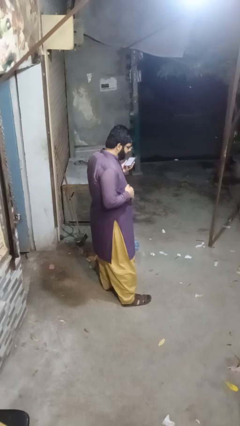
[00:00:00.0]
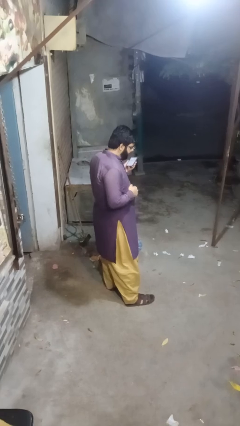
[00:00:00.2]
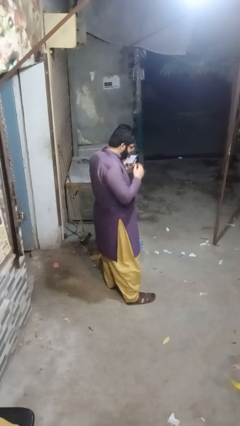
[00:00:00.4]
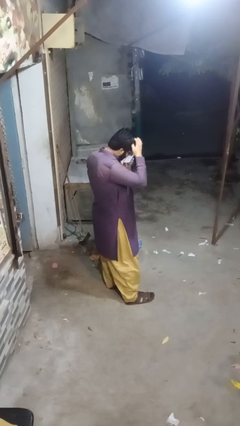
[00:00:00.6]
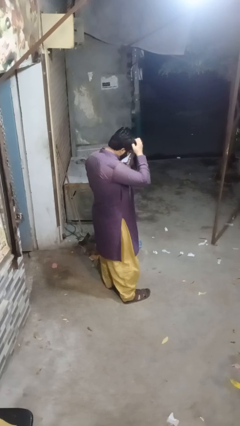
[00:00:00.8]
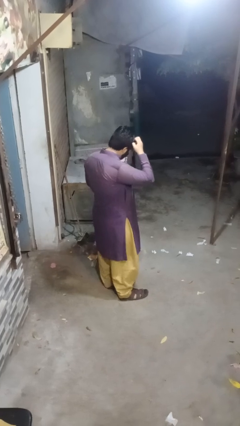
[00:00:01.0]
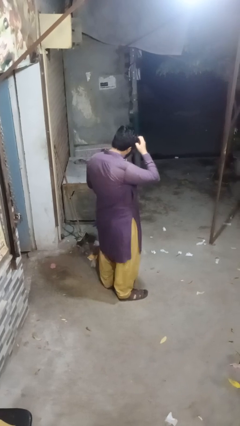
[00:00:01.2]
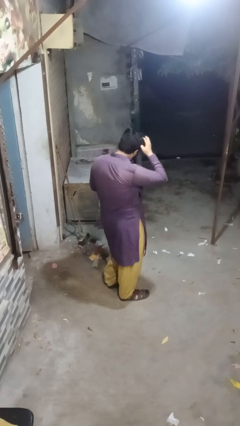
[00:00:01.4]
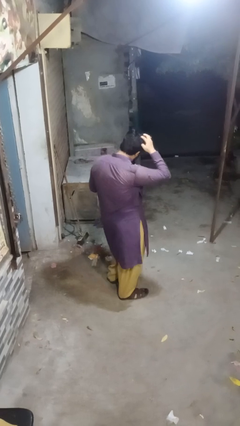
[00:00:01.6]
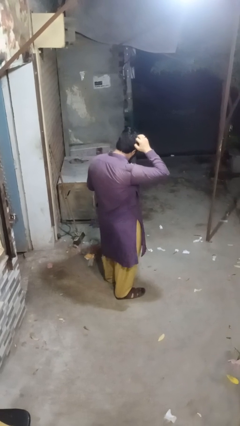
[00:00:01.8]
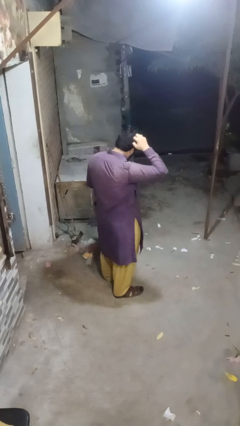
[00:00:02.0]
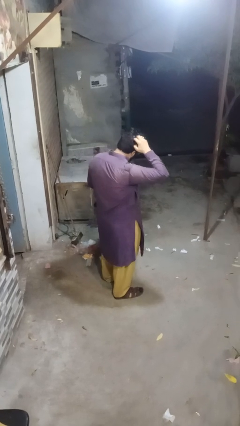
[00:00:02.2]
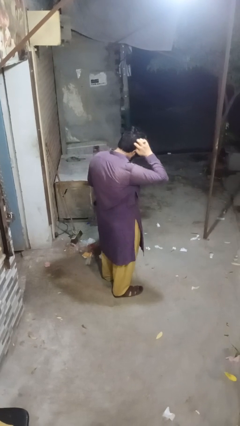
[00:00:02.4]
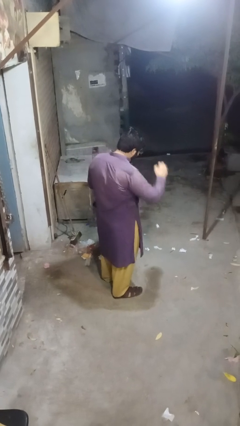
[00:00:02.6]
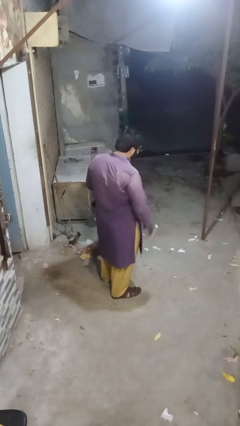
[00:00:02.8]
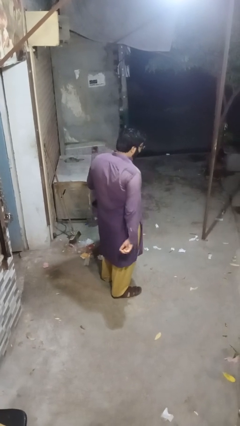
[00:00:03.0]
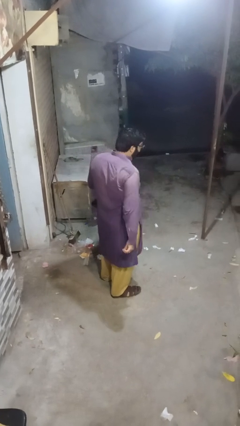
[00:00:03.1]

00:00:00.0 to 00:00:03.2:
person scratches face

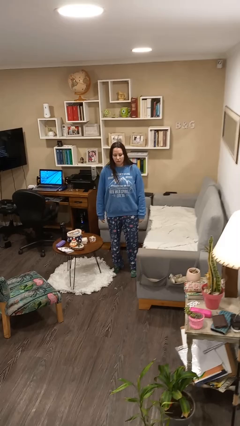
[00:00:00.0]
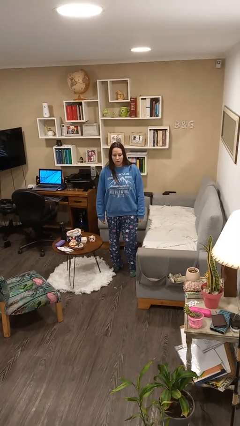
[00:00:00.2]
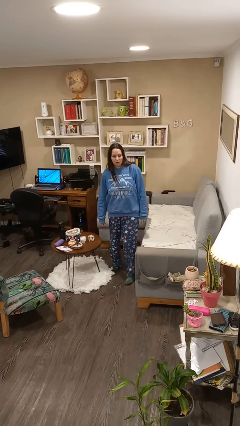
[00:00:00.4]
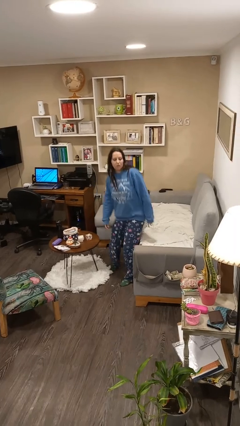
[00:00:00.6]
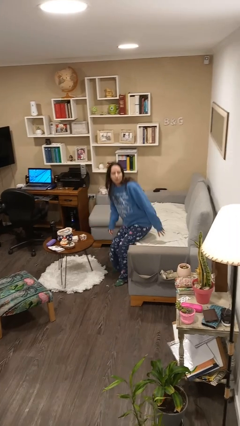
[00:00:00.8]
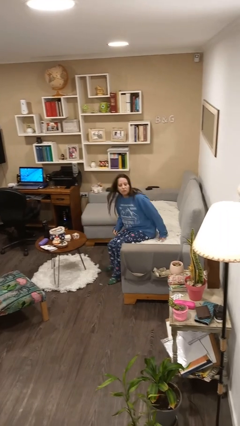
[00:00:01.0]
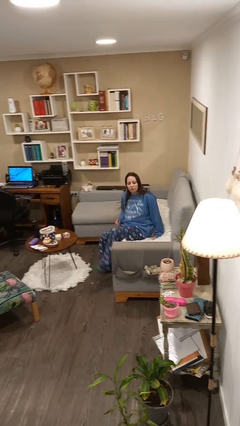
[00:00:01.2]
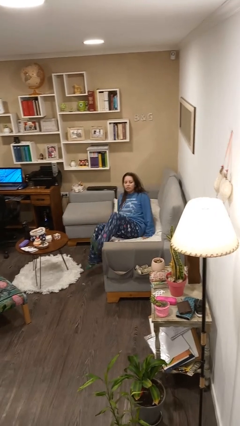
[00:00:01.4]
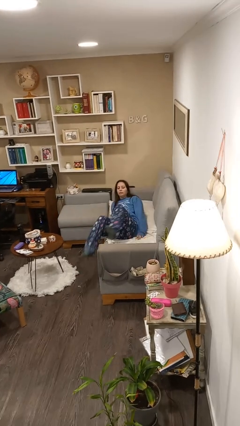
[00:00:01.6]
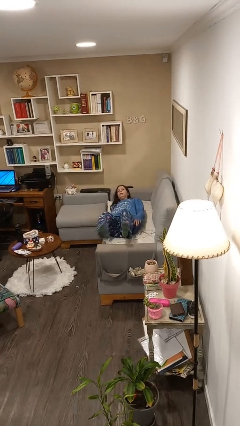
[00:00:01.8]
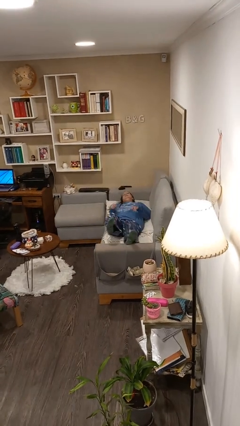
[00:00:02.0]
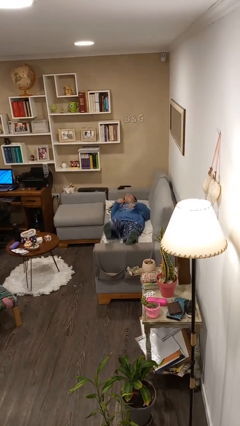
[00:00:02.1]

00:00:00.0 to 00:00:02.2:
person lies down on couch

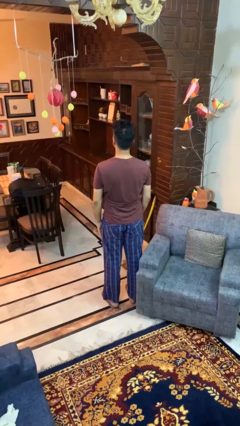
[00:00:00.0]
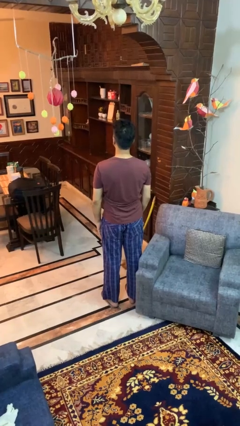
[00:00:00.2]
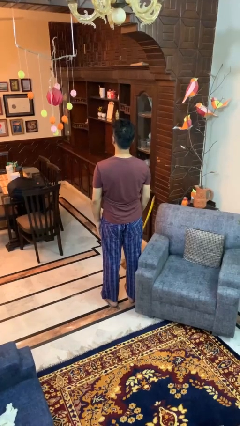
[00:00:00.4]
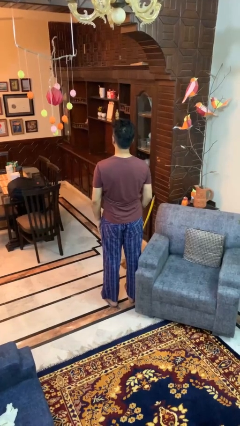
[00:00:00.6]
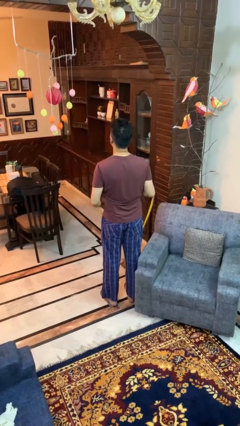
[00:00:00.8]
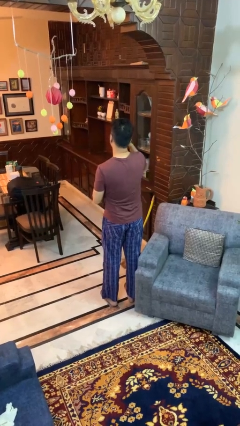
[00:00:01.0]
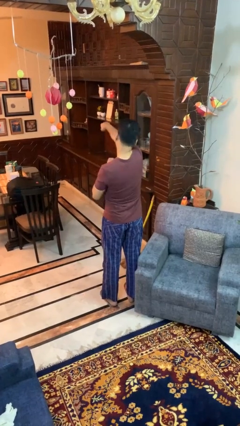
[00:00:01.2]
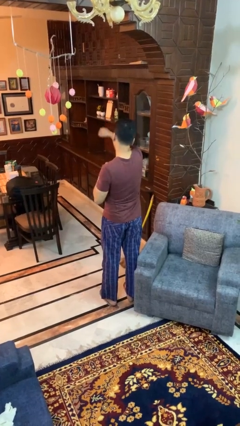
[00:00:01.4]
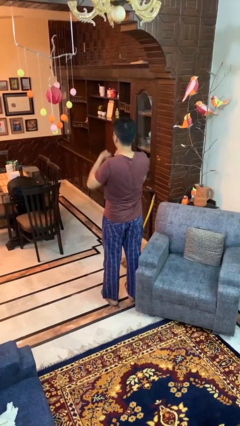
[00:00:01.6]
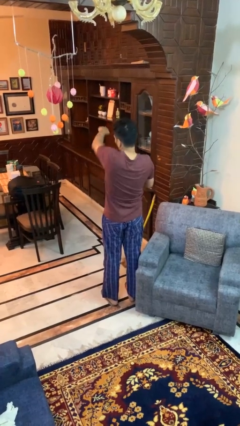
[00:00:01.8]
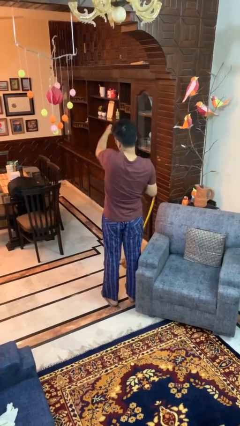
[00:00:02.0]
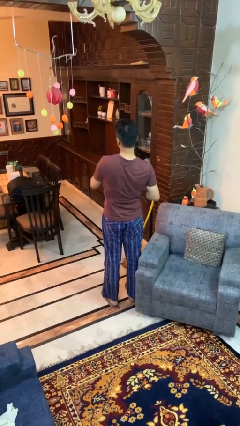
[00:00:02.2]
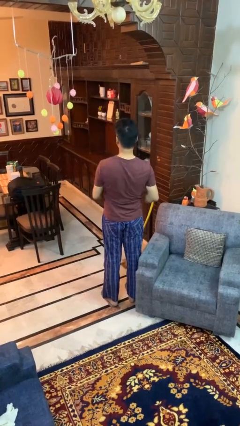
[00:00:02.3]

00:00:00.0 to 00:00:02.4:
person punches

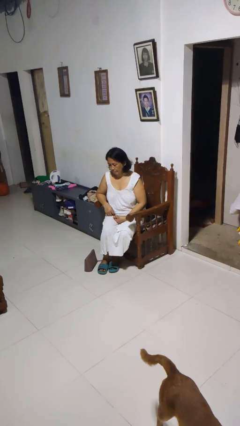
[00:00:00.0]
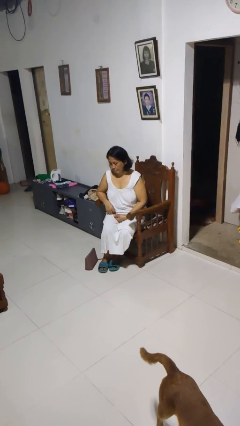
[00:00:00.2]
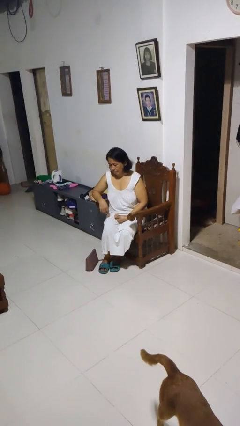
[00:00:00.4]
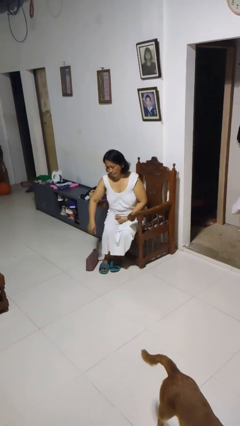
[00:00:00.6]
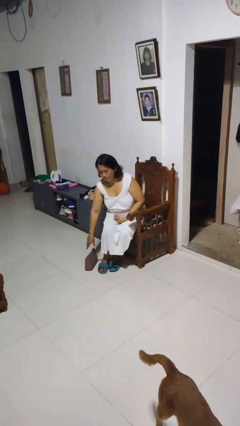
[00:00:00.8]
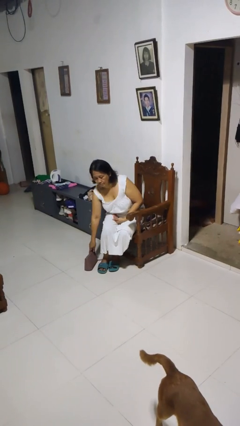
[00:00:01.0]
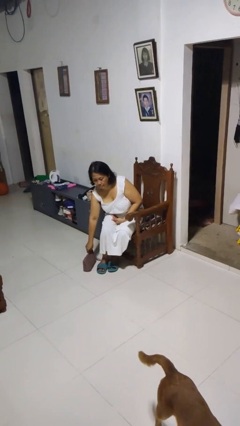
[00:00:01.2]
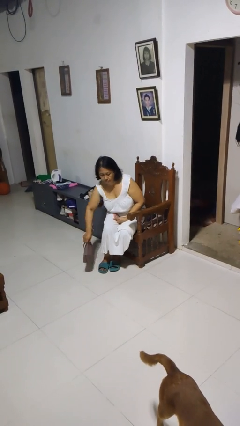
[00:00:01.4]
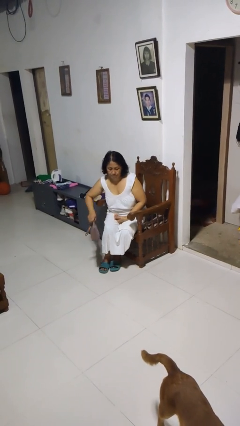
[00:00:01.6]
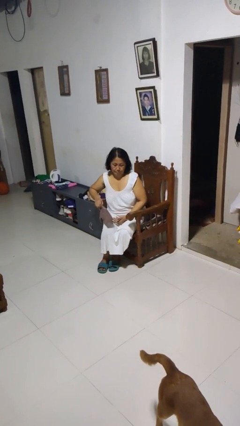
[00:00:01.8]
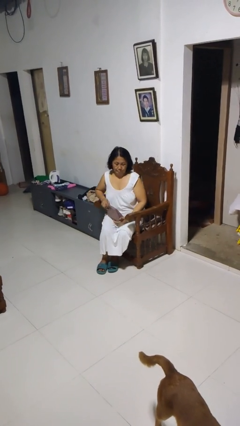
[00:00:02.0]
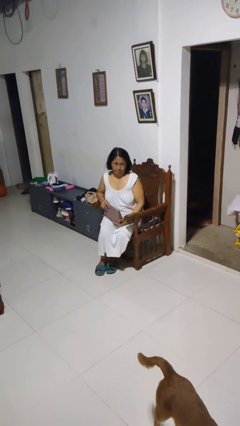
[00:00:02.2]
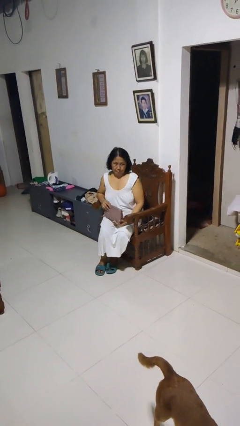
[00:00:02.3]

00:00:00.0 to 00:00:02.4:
person picks up object from floor

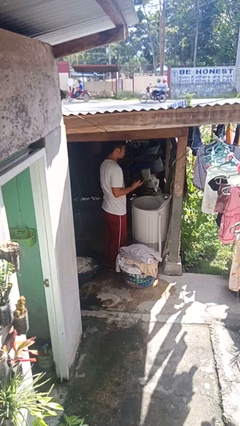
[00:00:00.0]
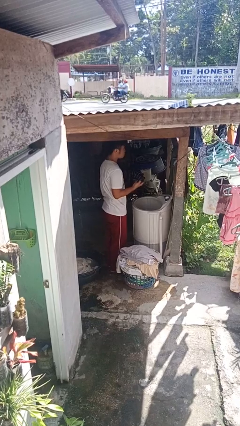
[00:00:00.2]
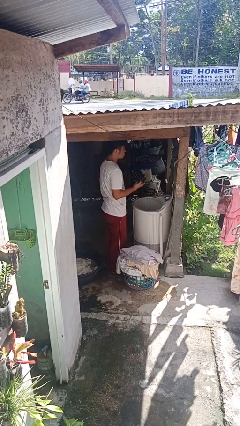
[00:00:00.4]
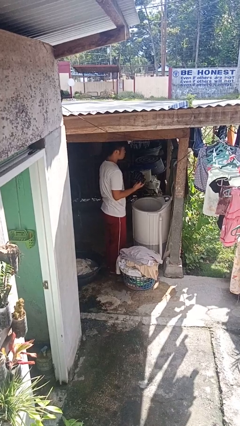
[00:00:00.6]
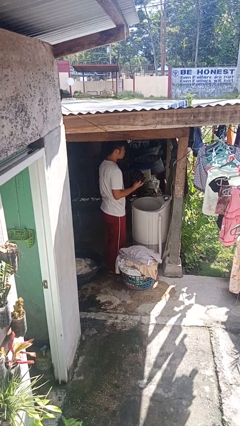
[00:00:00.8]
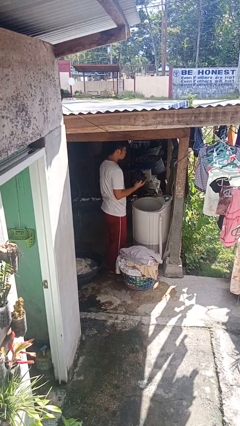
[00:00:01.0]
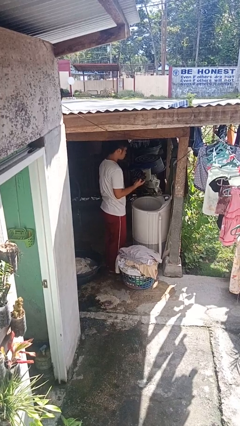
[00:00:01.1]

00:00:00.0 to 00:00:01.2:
person unloads clotheswasher

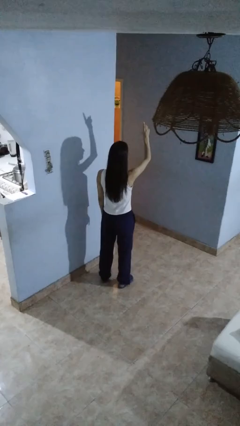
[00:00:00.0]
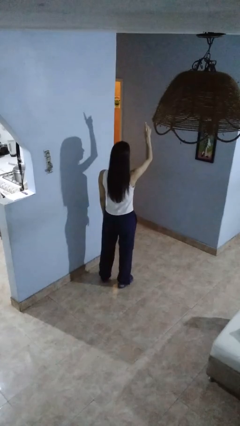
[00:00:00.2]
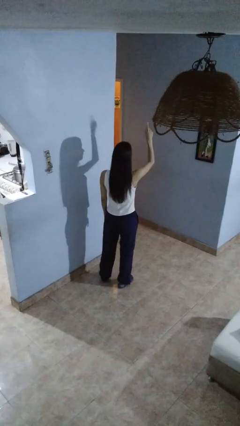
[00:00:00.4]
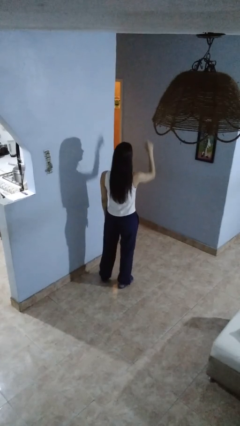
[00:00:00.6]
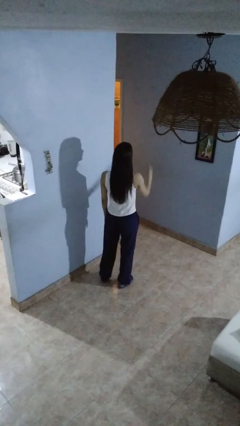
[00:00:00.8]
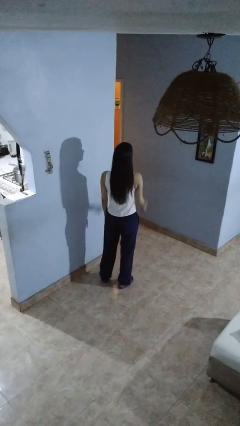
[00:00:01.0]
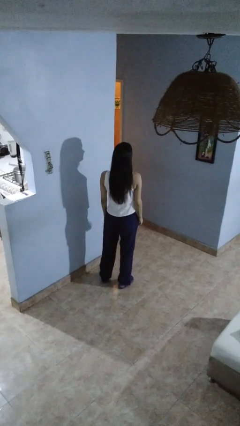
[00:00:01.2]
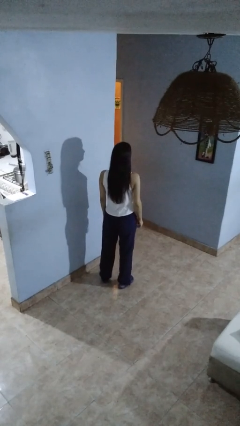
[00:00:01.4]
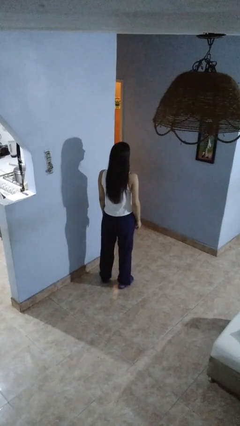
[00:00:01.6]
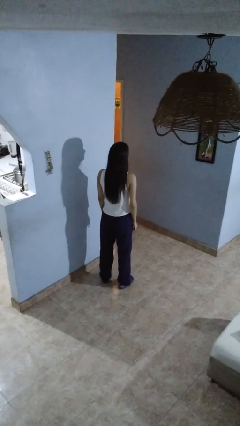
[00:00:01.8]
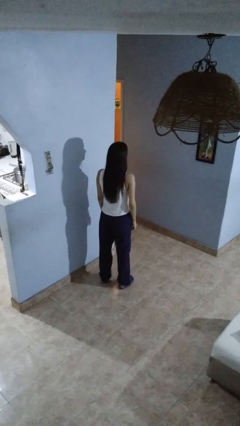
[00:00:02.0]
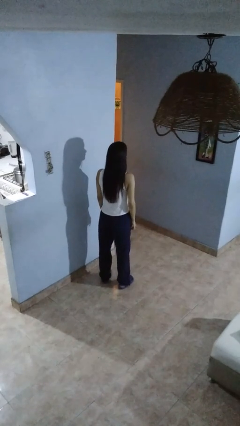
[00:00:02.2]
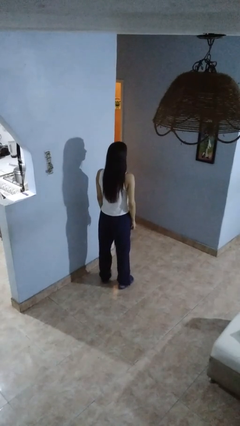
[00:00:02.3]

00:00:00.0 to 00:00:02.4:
person gestures lower hand

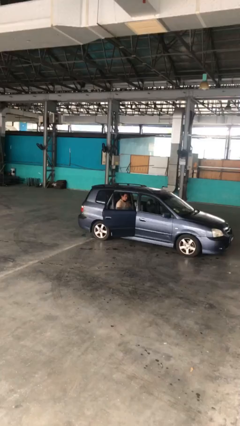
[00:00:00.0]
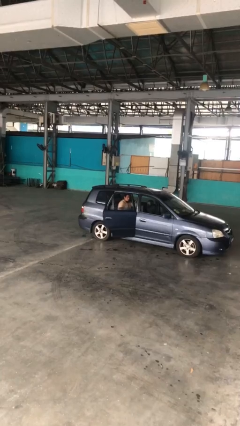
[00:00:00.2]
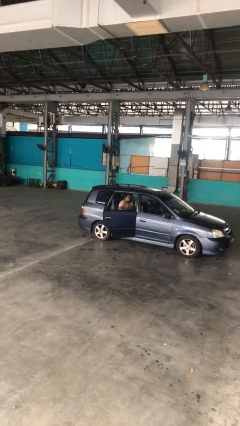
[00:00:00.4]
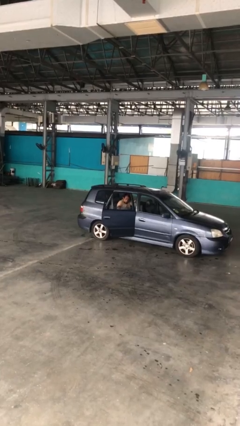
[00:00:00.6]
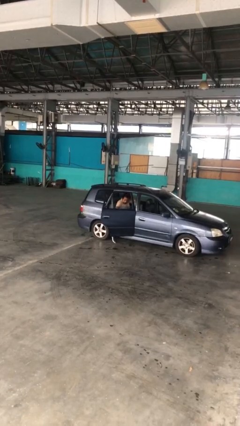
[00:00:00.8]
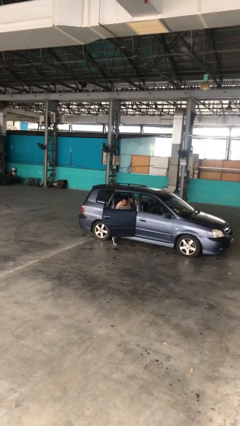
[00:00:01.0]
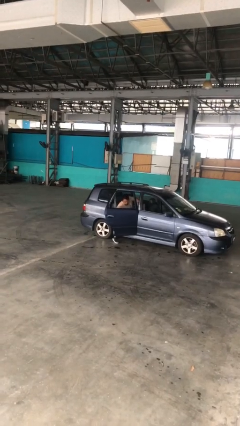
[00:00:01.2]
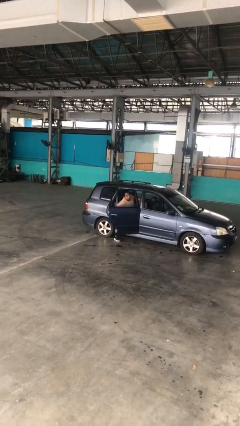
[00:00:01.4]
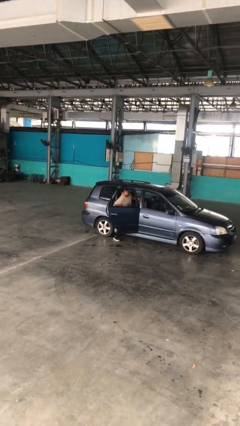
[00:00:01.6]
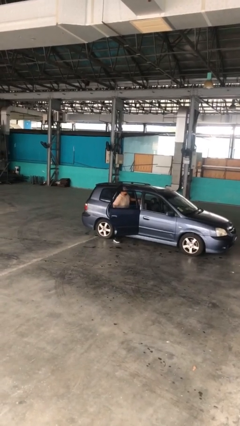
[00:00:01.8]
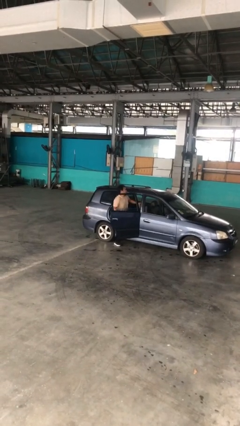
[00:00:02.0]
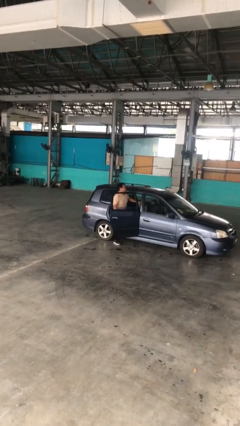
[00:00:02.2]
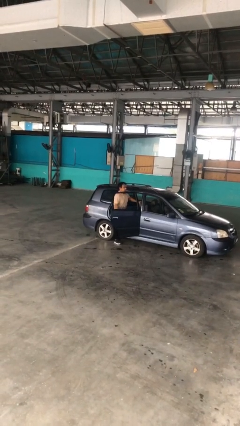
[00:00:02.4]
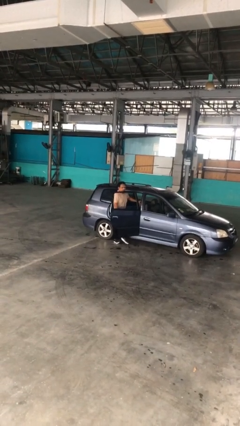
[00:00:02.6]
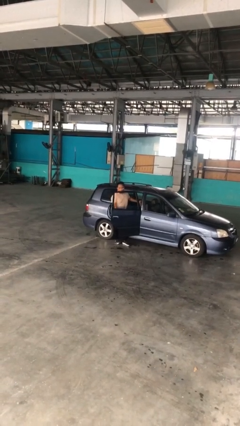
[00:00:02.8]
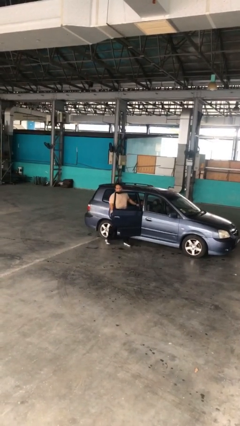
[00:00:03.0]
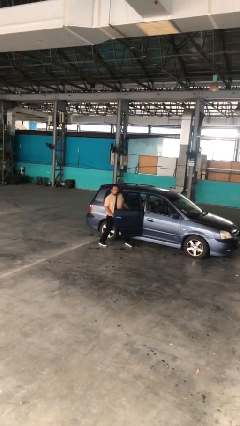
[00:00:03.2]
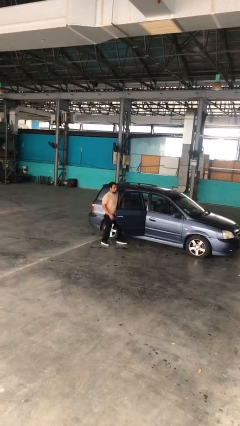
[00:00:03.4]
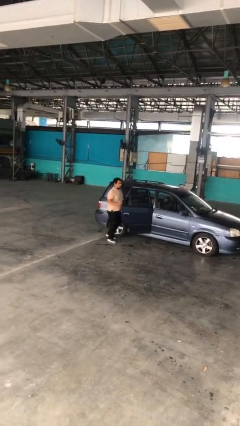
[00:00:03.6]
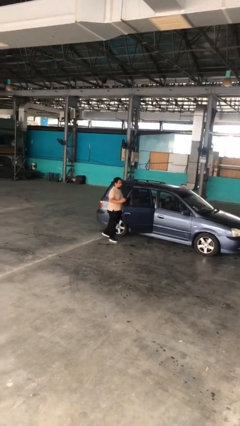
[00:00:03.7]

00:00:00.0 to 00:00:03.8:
person exits car
